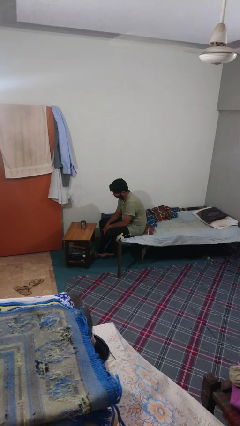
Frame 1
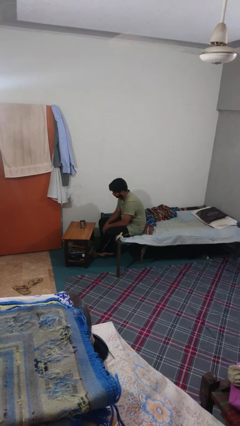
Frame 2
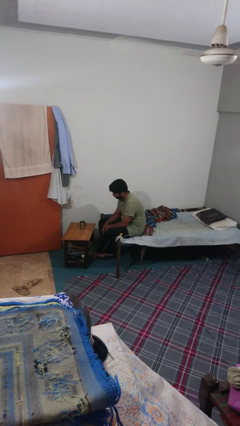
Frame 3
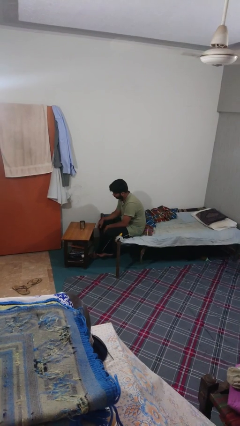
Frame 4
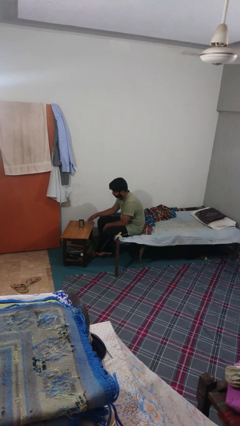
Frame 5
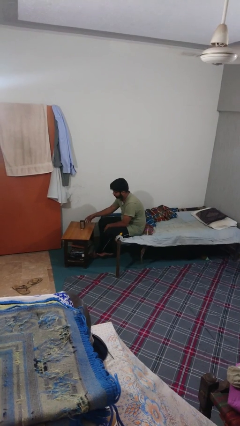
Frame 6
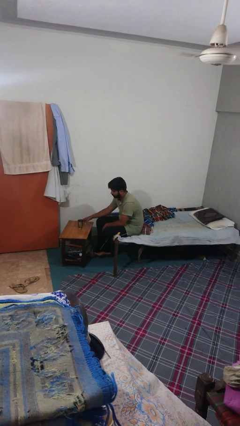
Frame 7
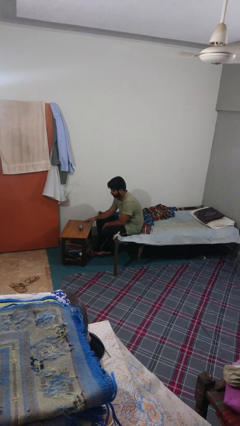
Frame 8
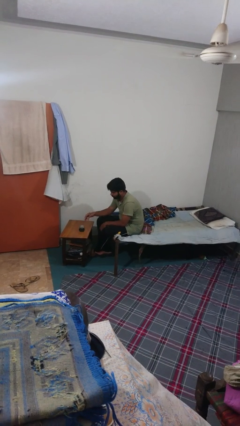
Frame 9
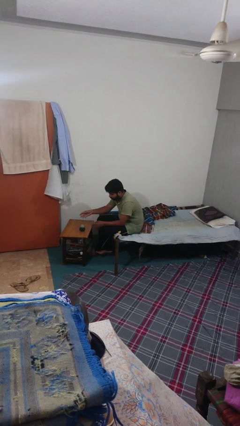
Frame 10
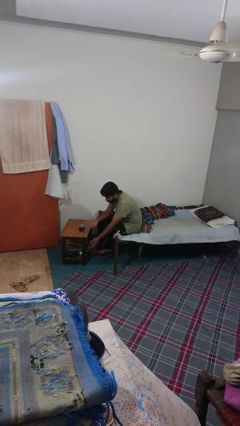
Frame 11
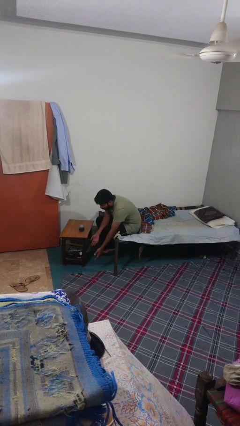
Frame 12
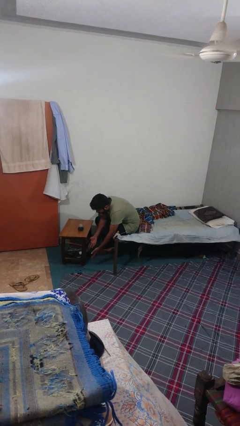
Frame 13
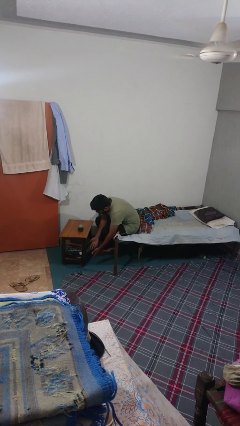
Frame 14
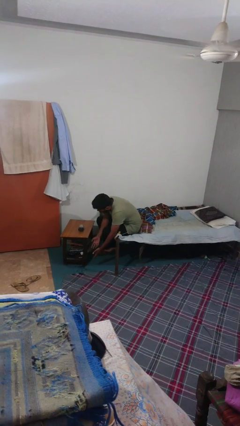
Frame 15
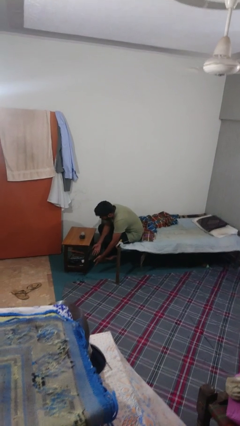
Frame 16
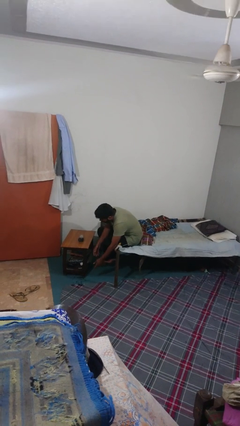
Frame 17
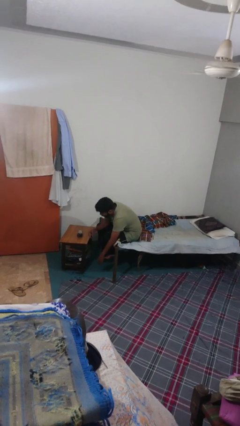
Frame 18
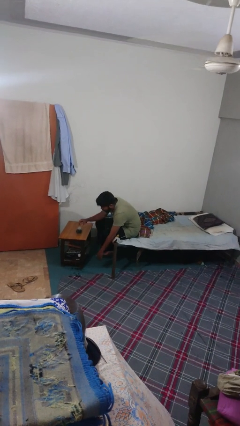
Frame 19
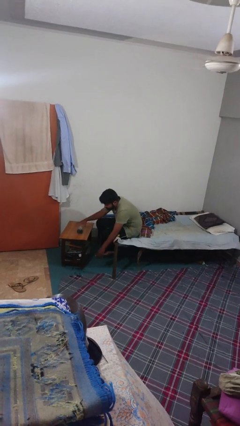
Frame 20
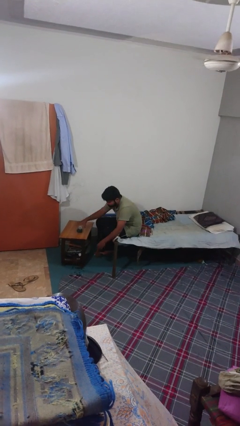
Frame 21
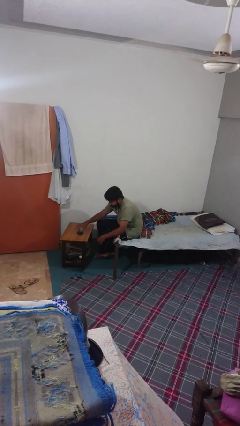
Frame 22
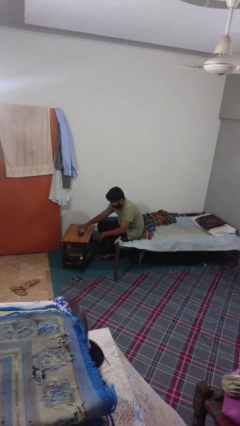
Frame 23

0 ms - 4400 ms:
person spills on table

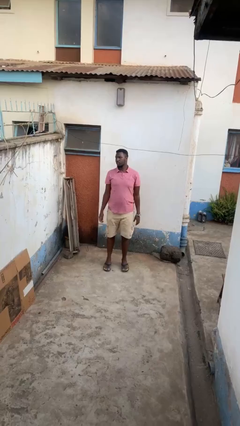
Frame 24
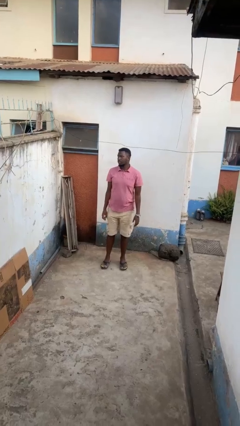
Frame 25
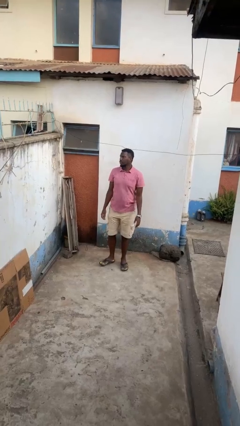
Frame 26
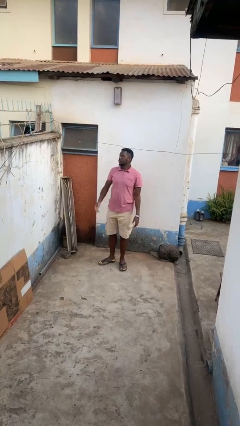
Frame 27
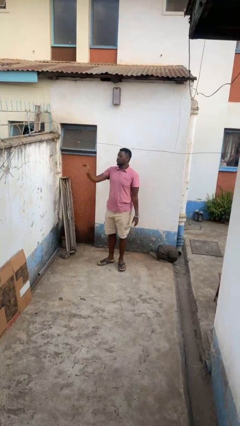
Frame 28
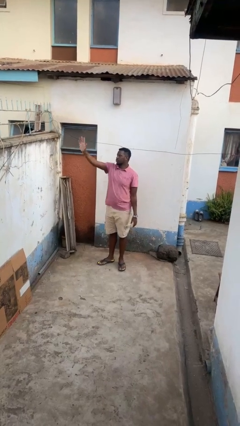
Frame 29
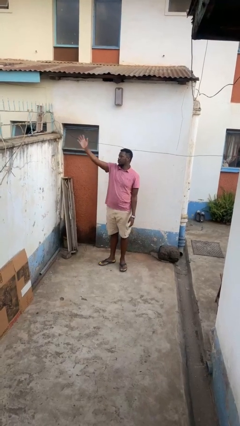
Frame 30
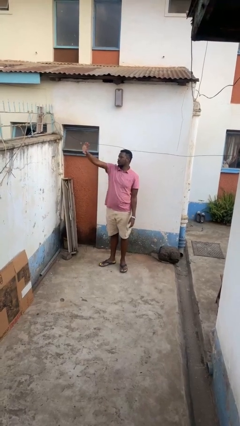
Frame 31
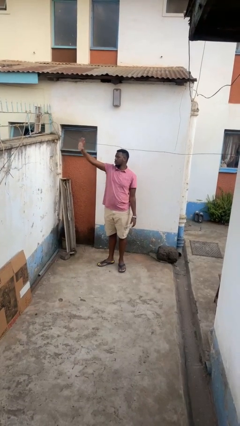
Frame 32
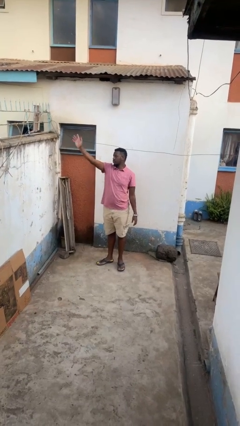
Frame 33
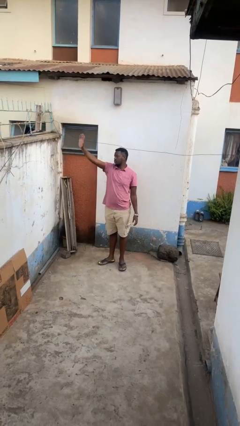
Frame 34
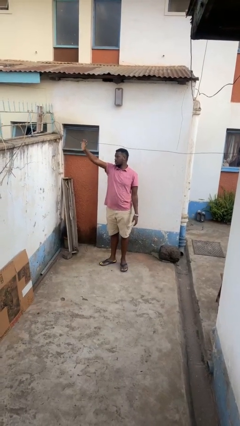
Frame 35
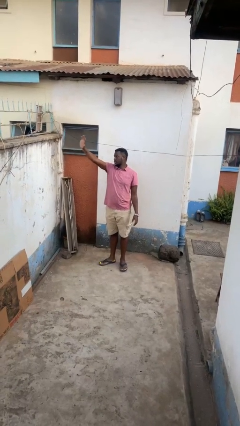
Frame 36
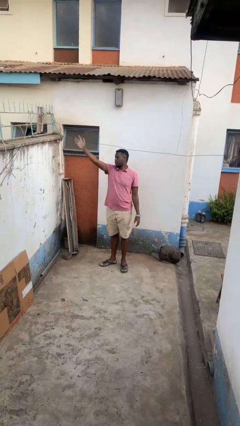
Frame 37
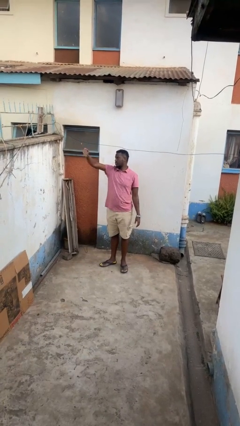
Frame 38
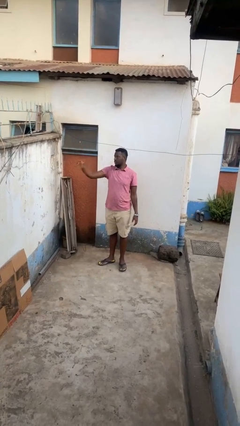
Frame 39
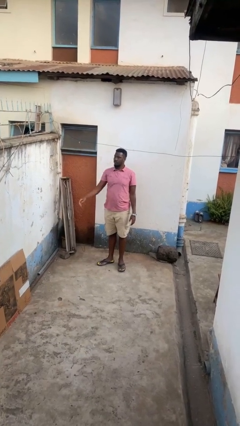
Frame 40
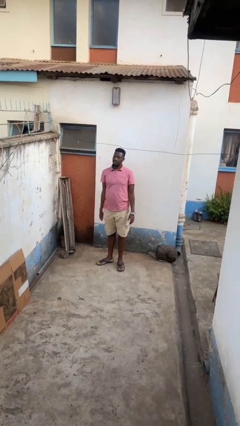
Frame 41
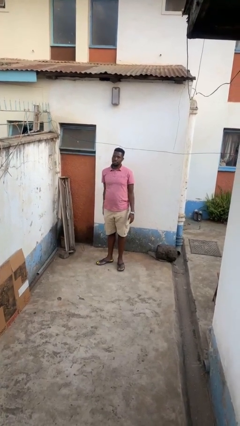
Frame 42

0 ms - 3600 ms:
person waves at person

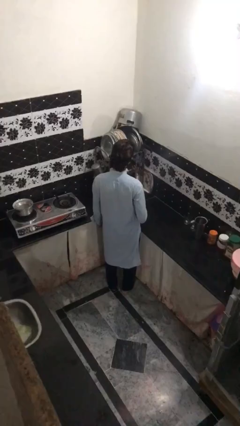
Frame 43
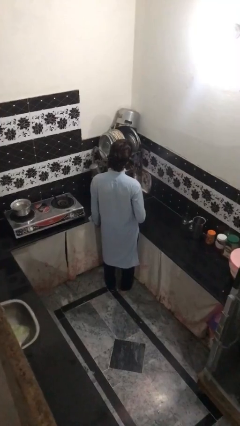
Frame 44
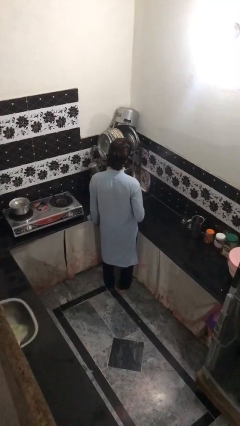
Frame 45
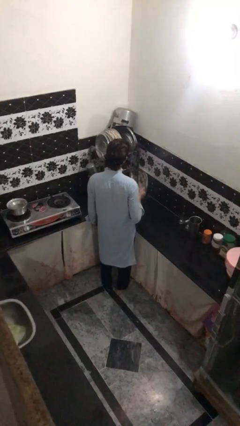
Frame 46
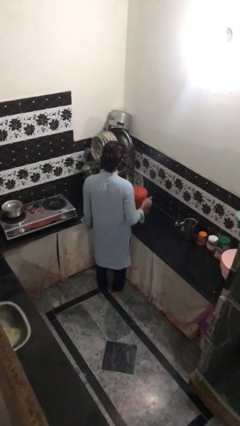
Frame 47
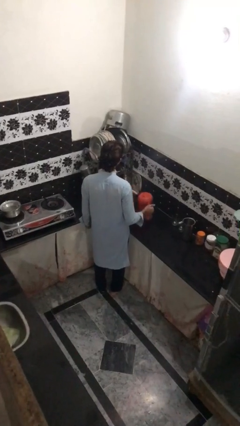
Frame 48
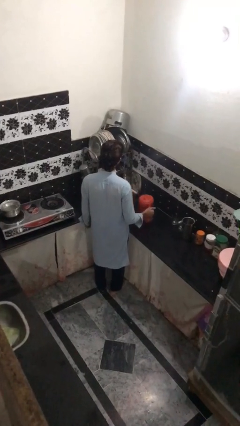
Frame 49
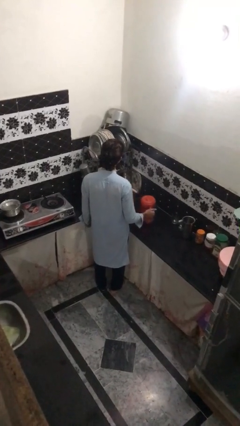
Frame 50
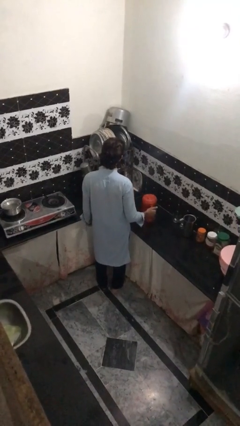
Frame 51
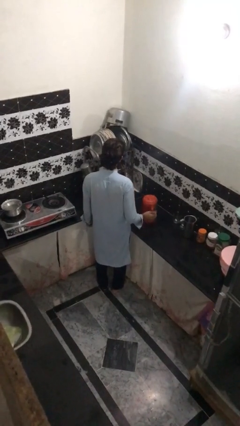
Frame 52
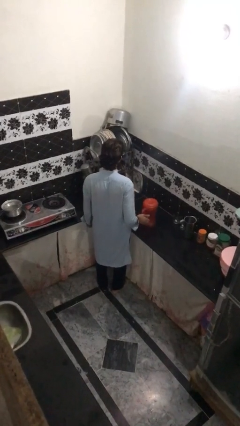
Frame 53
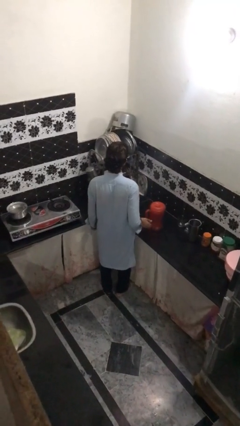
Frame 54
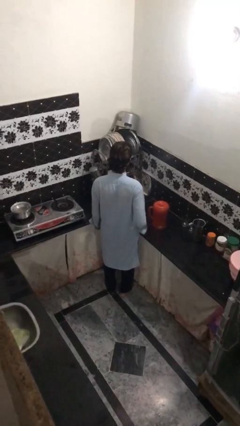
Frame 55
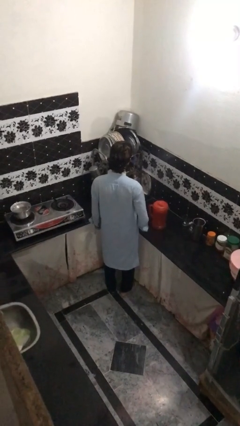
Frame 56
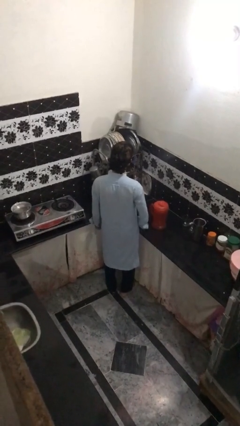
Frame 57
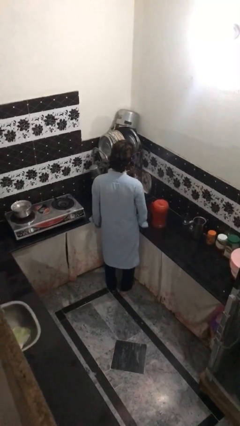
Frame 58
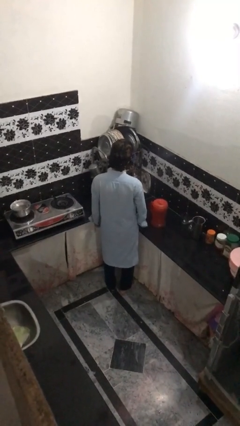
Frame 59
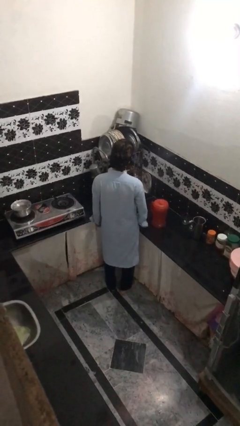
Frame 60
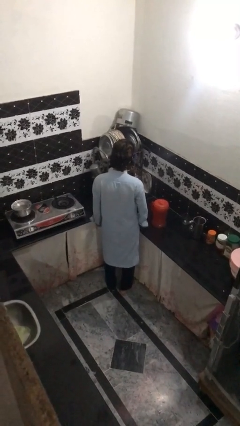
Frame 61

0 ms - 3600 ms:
person puts down object on countertop

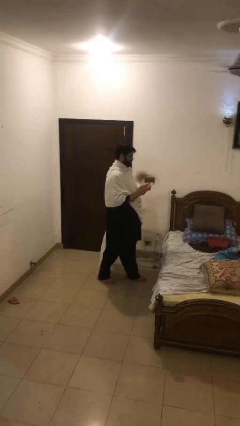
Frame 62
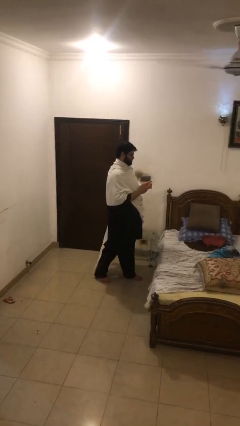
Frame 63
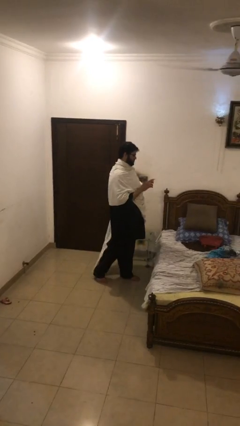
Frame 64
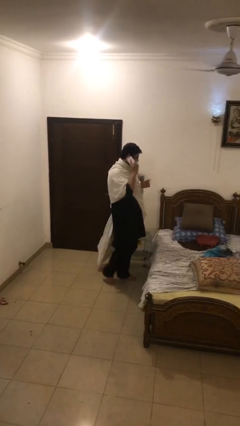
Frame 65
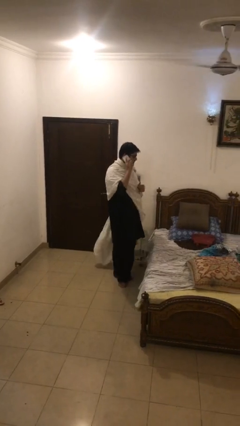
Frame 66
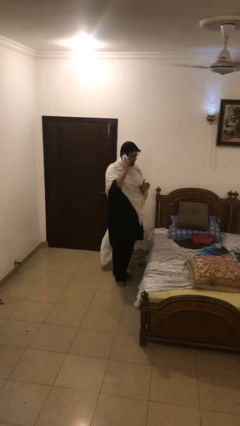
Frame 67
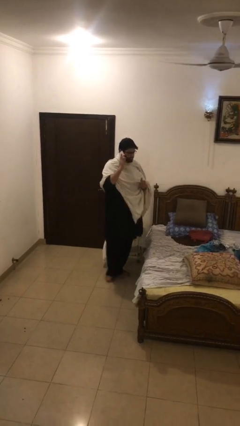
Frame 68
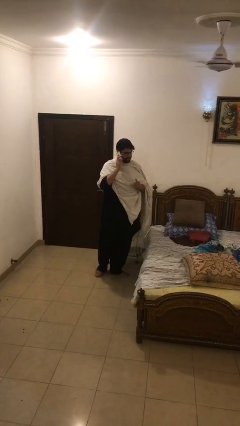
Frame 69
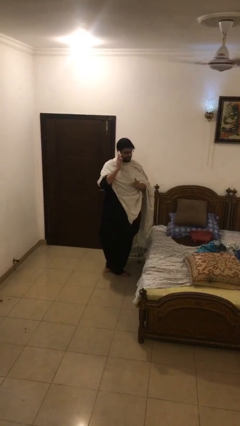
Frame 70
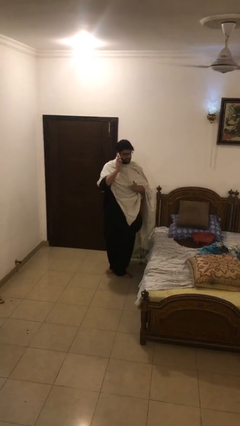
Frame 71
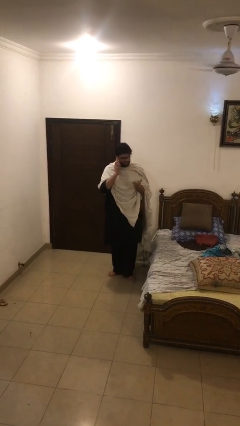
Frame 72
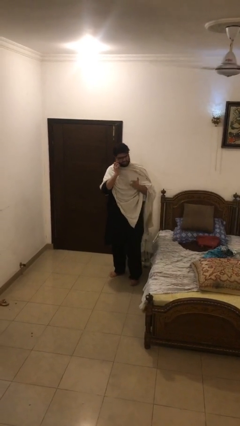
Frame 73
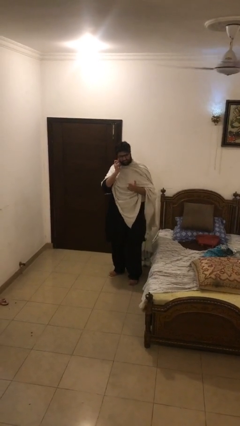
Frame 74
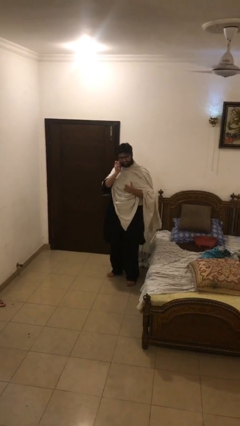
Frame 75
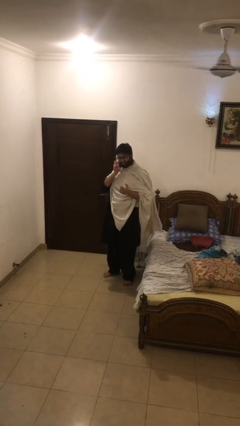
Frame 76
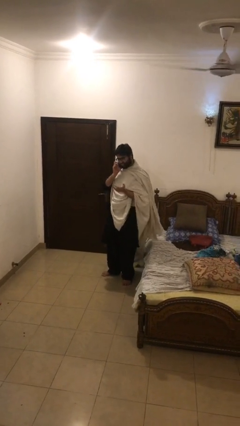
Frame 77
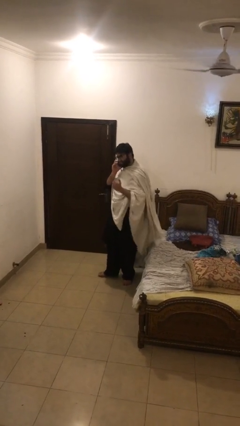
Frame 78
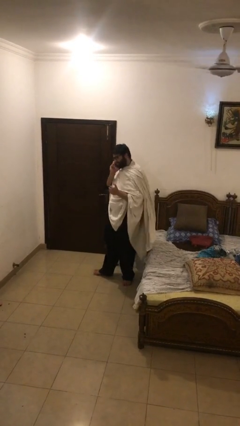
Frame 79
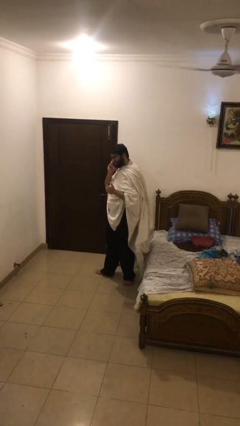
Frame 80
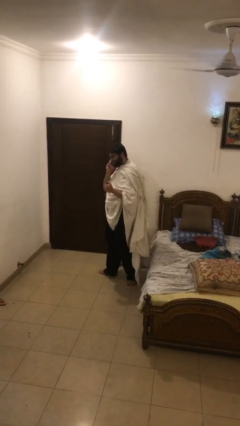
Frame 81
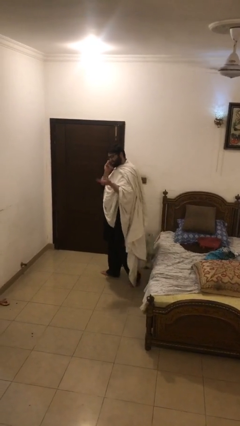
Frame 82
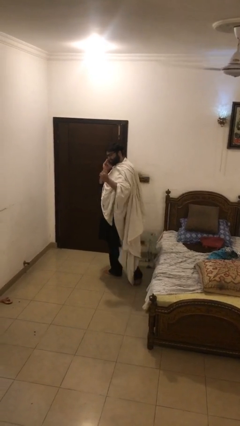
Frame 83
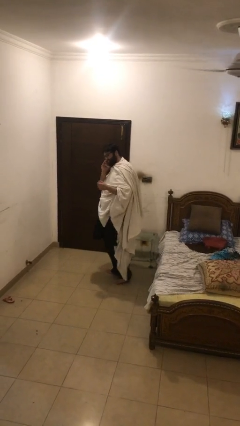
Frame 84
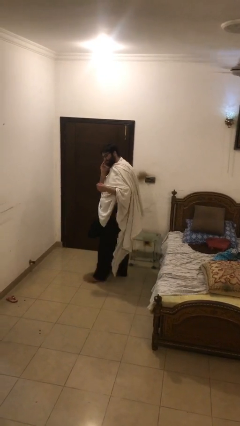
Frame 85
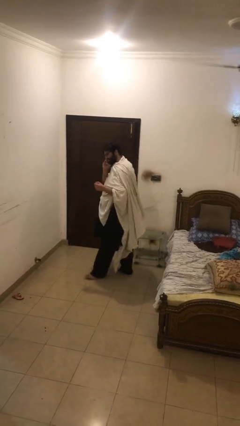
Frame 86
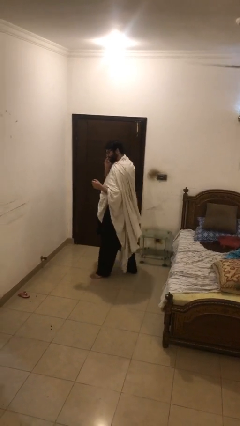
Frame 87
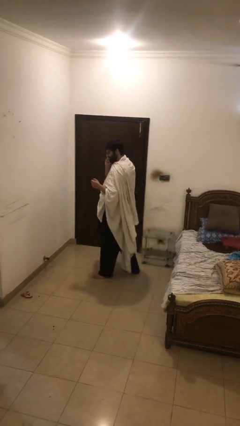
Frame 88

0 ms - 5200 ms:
person talks on phone

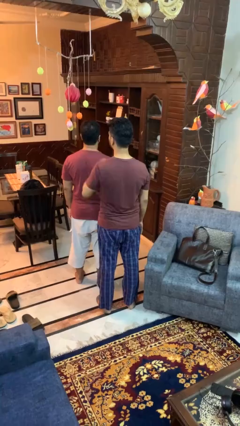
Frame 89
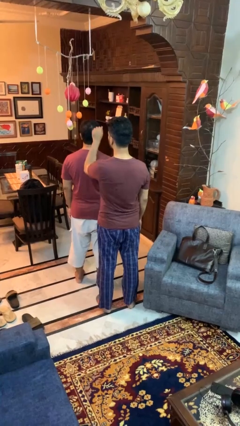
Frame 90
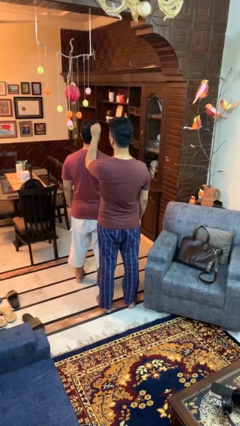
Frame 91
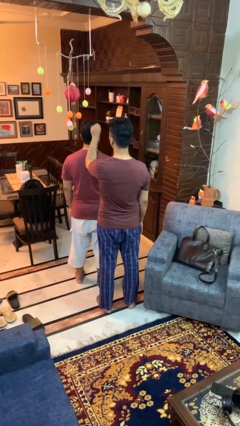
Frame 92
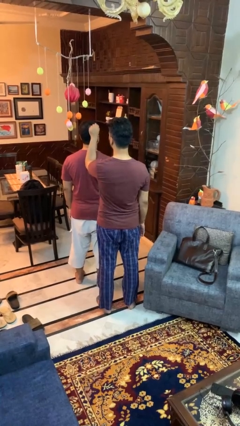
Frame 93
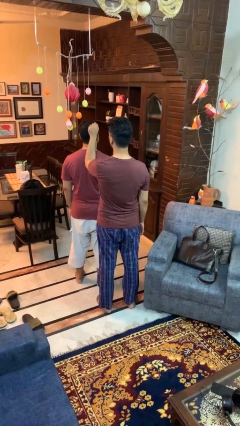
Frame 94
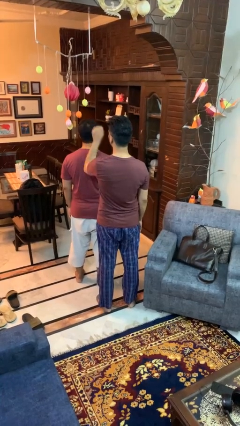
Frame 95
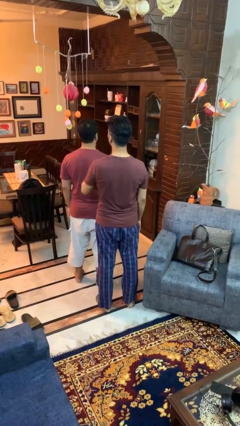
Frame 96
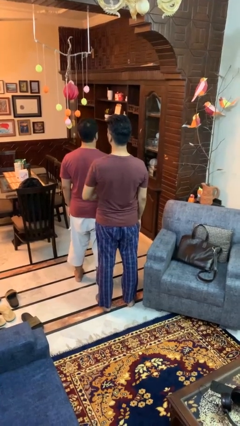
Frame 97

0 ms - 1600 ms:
person grabs person by hair
